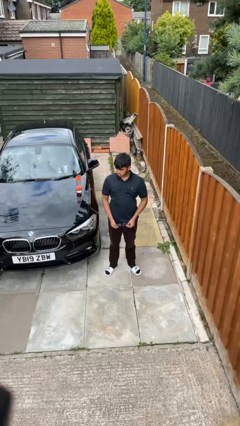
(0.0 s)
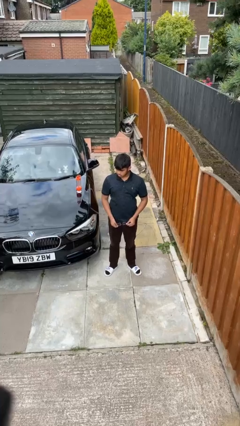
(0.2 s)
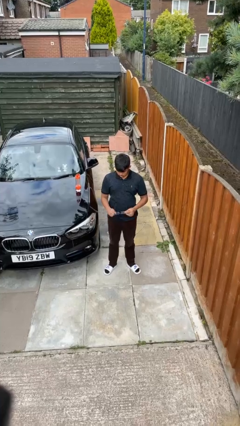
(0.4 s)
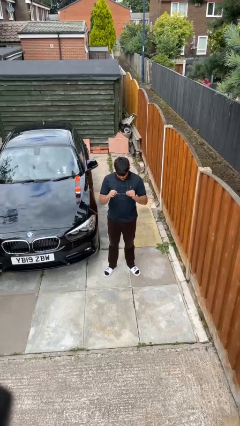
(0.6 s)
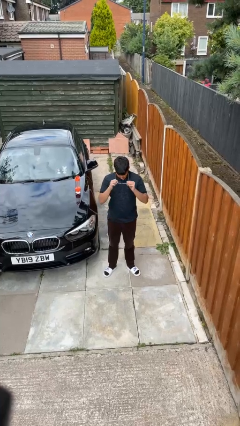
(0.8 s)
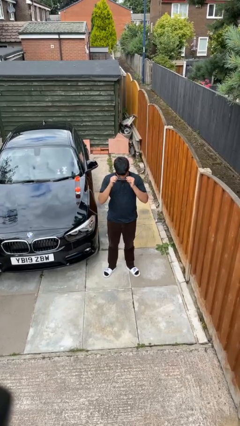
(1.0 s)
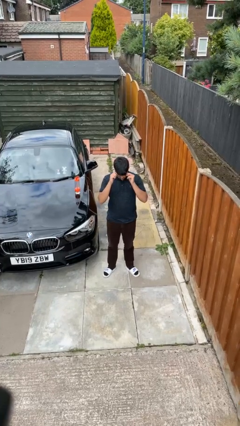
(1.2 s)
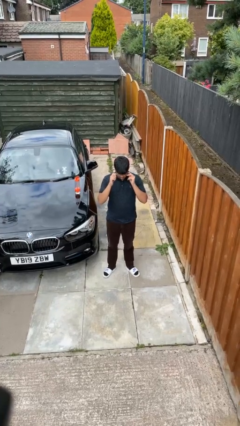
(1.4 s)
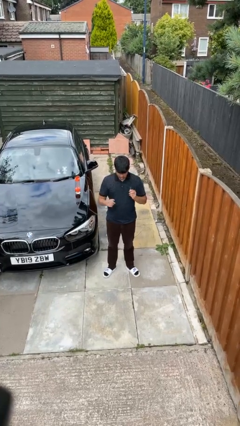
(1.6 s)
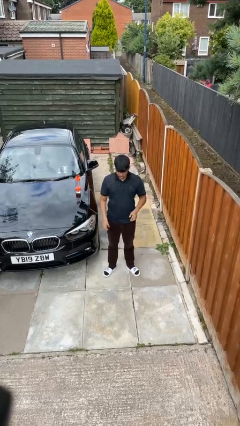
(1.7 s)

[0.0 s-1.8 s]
person puts on glasses

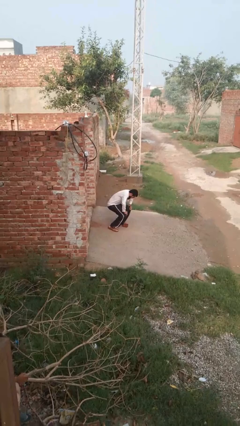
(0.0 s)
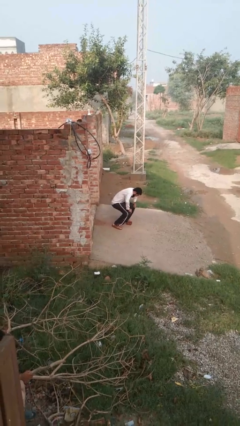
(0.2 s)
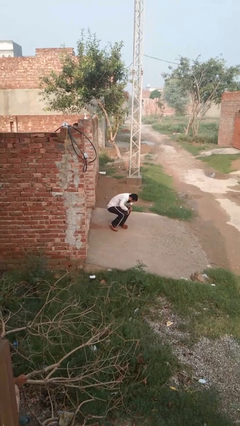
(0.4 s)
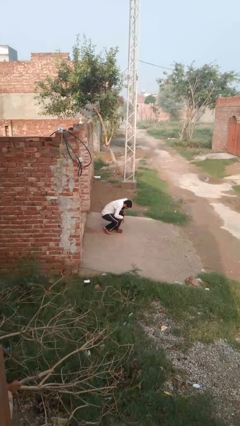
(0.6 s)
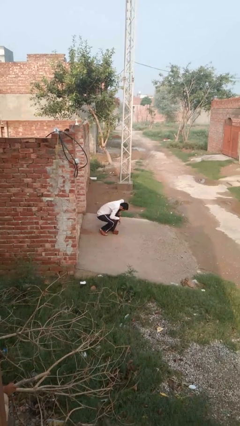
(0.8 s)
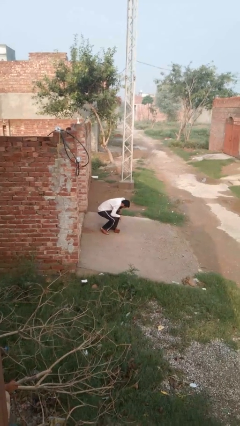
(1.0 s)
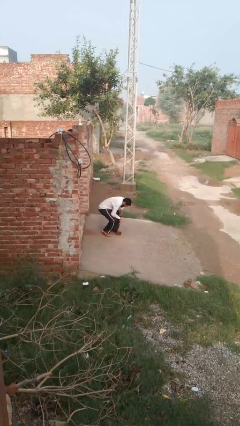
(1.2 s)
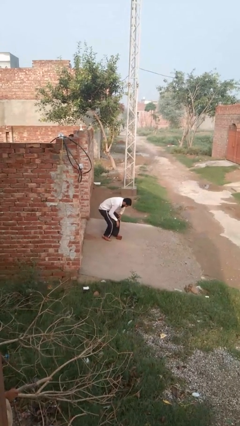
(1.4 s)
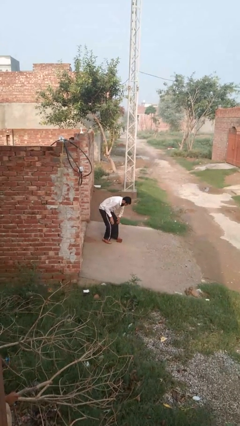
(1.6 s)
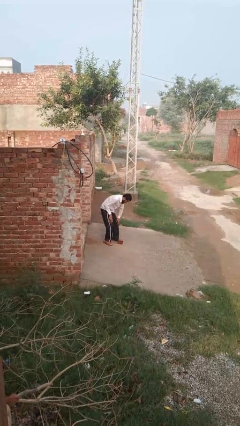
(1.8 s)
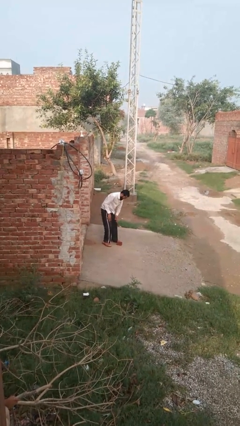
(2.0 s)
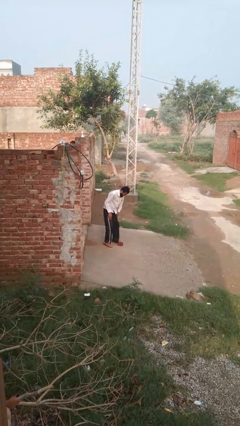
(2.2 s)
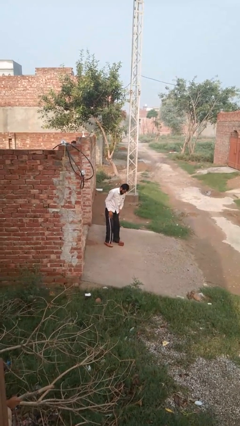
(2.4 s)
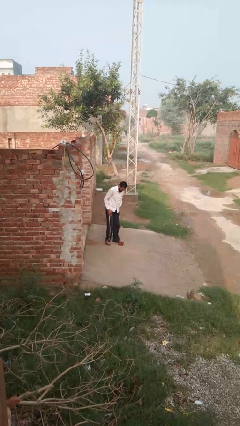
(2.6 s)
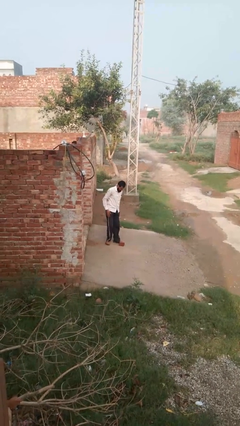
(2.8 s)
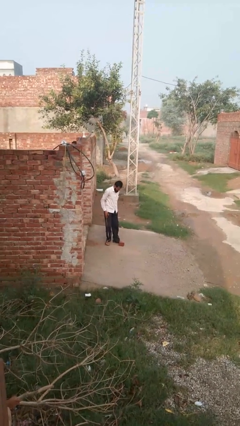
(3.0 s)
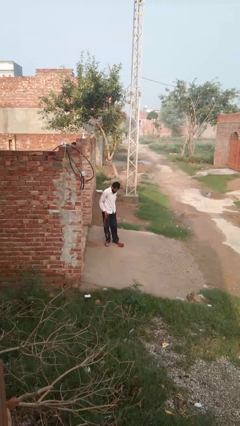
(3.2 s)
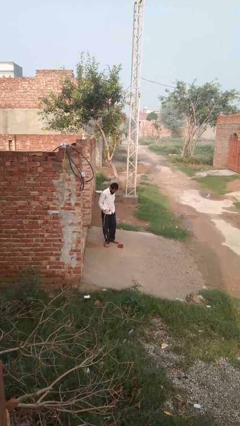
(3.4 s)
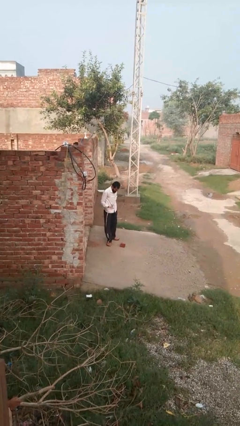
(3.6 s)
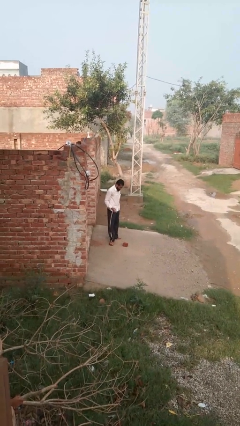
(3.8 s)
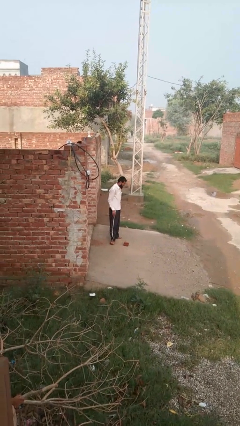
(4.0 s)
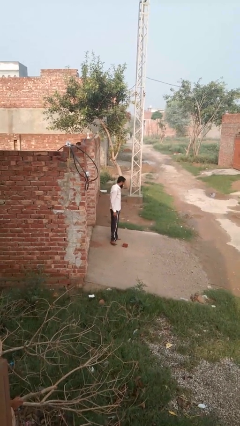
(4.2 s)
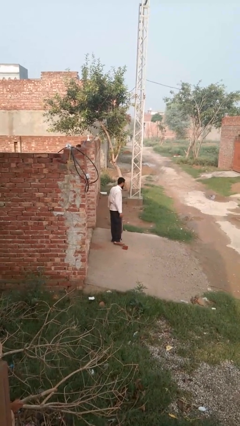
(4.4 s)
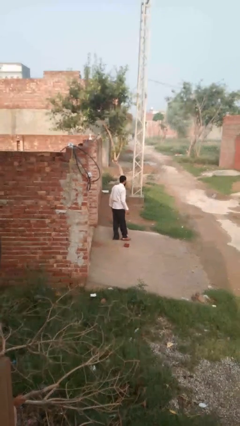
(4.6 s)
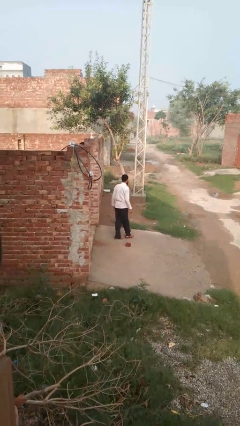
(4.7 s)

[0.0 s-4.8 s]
person stands up from floor

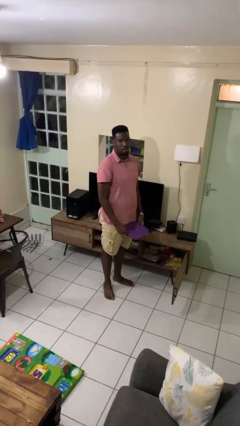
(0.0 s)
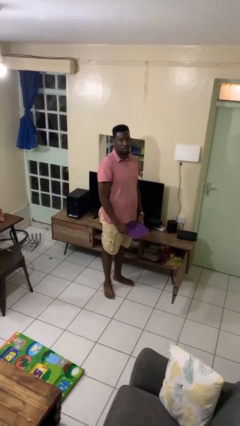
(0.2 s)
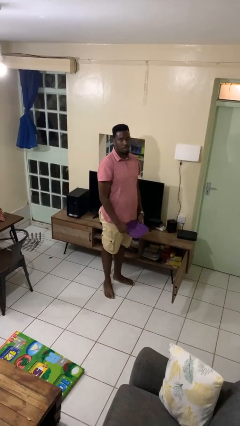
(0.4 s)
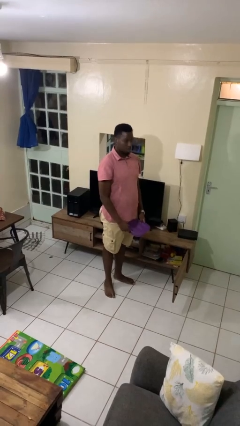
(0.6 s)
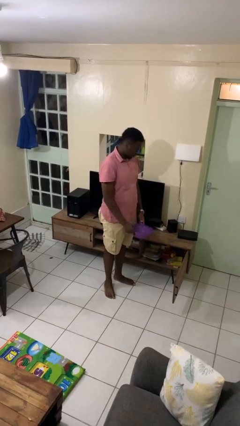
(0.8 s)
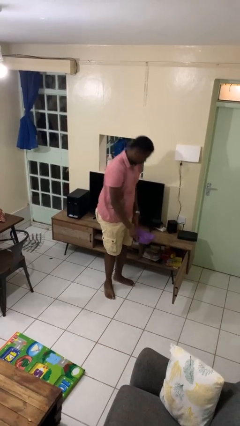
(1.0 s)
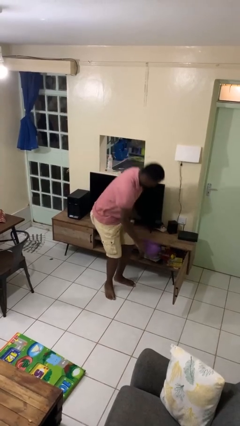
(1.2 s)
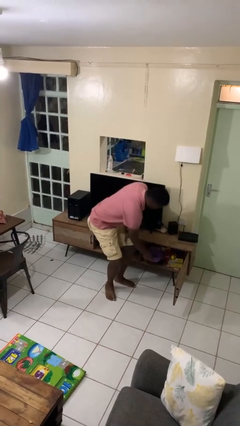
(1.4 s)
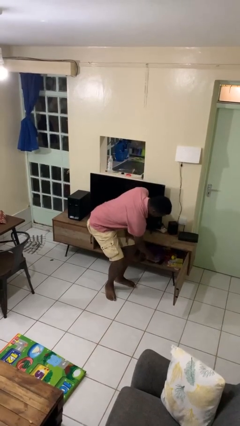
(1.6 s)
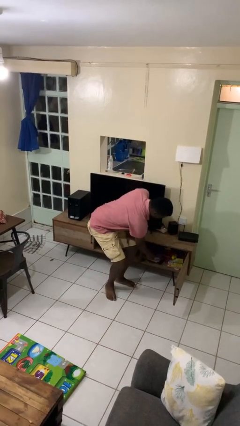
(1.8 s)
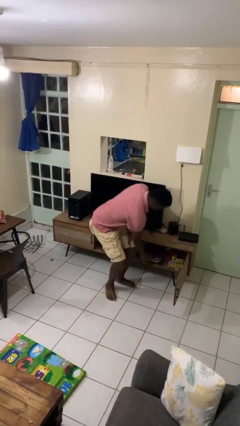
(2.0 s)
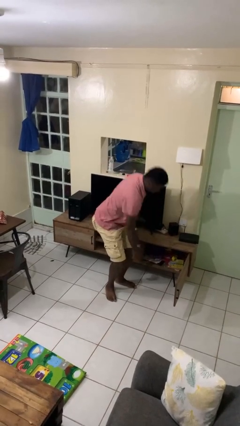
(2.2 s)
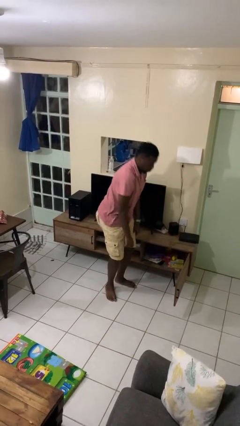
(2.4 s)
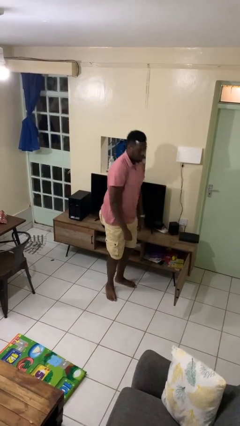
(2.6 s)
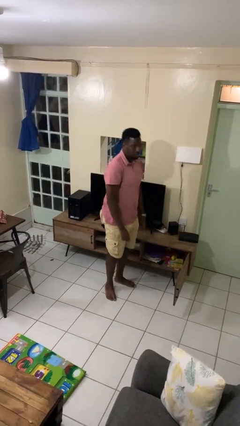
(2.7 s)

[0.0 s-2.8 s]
person puts down object into cabinet

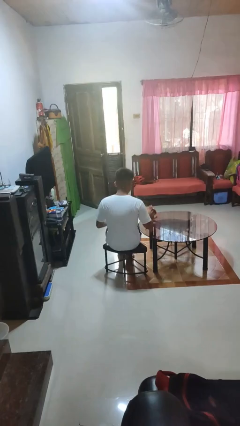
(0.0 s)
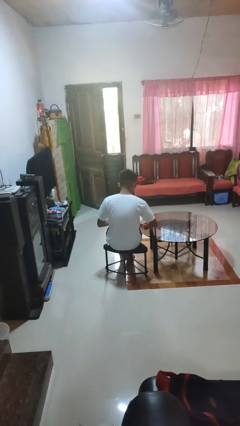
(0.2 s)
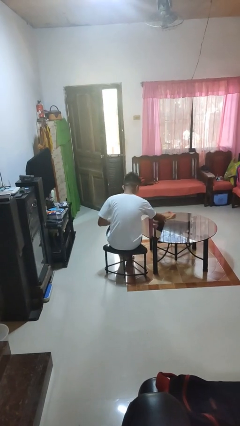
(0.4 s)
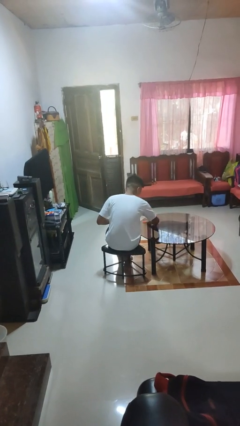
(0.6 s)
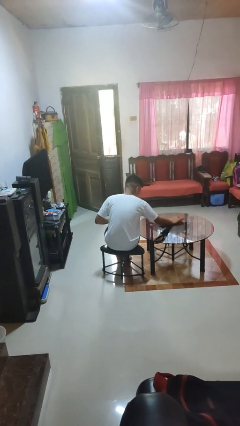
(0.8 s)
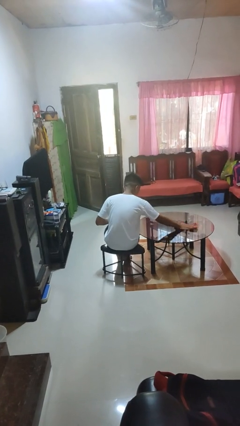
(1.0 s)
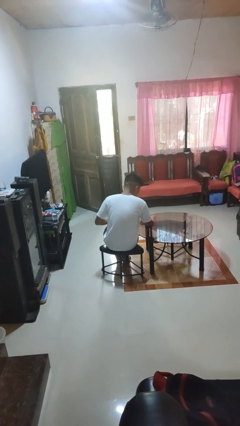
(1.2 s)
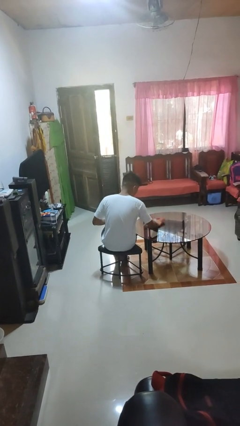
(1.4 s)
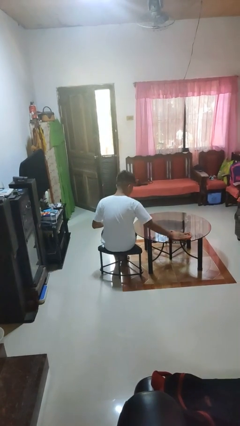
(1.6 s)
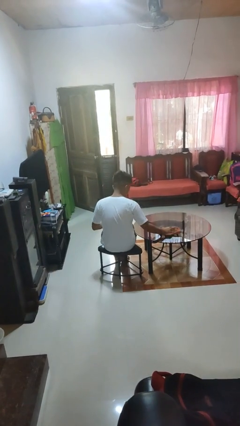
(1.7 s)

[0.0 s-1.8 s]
person cleans table with rag

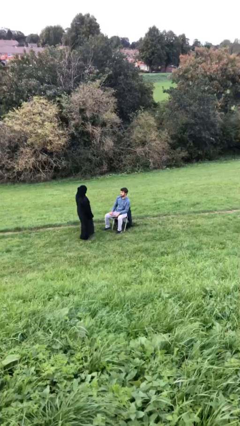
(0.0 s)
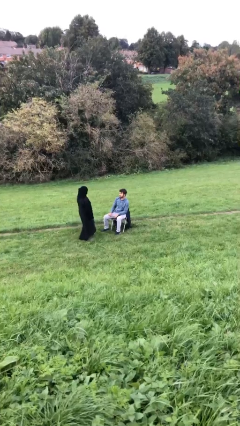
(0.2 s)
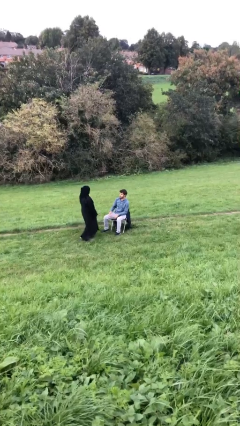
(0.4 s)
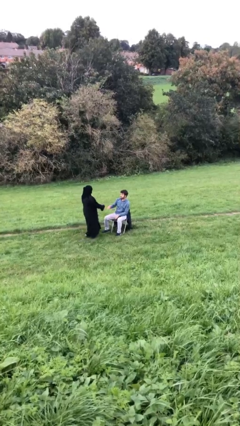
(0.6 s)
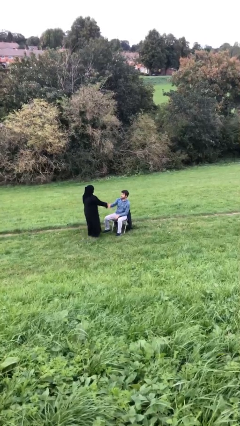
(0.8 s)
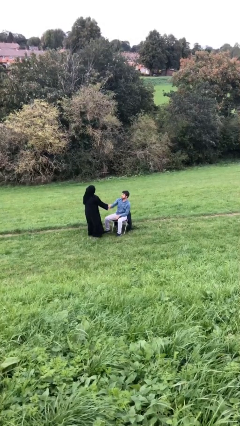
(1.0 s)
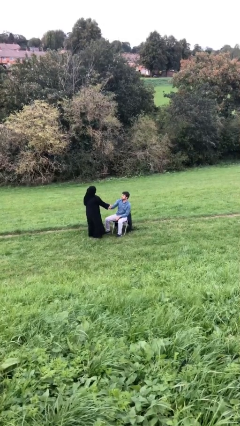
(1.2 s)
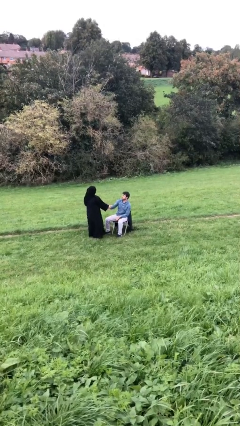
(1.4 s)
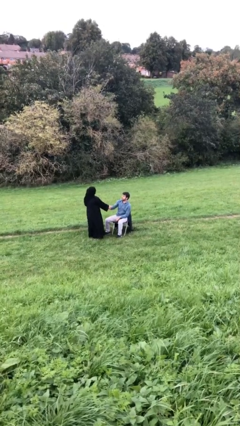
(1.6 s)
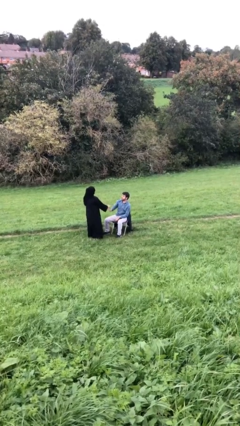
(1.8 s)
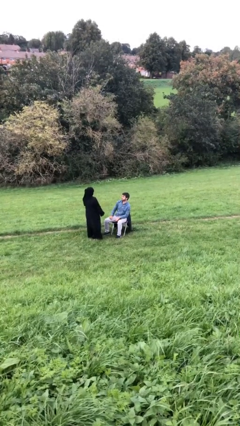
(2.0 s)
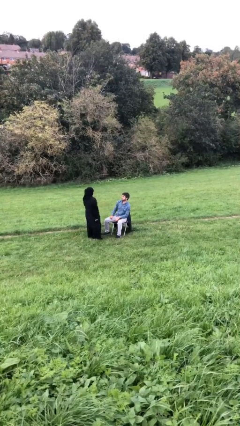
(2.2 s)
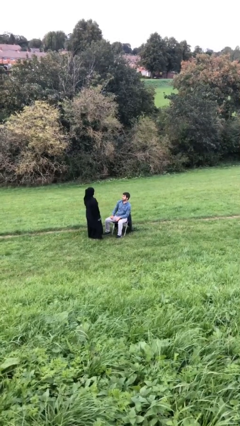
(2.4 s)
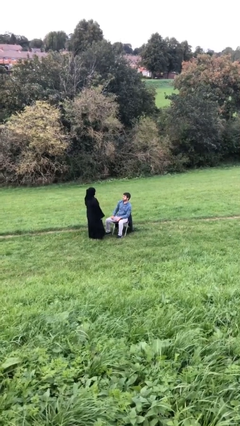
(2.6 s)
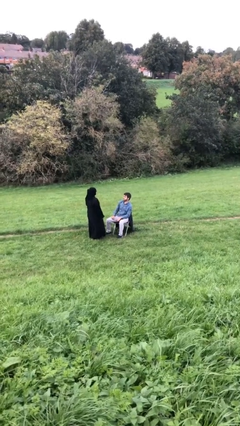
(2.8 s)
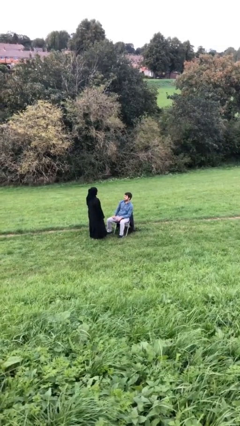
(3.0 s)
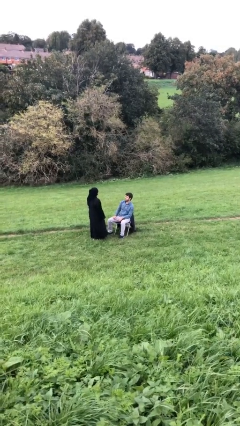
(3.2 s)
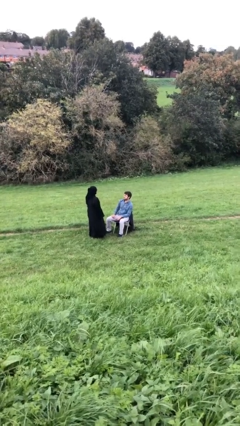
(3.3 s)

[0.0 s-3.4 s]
person shakes hand

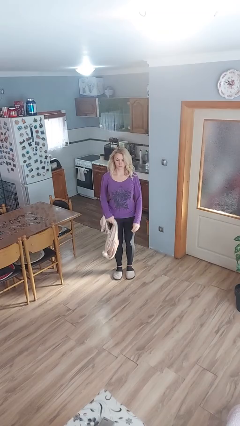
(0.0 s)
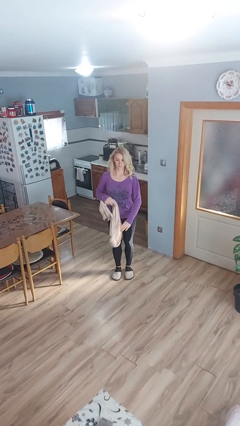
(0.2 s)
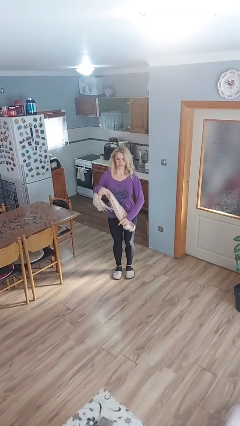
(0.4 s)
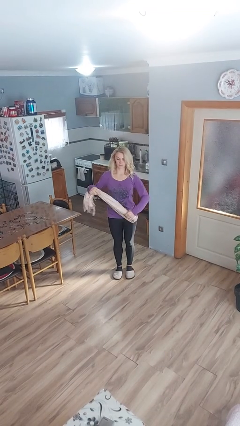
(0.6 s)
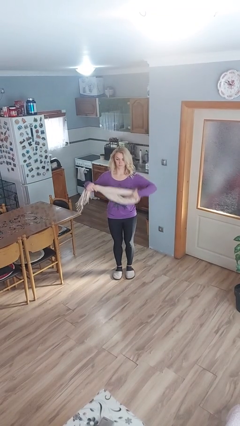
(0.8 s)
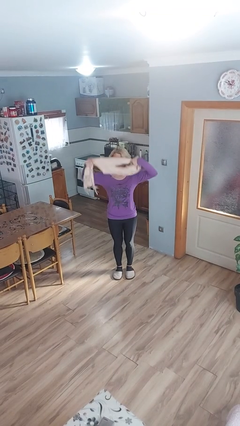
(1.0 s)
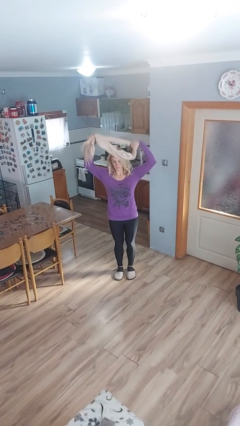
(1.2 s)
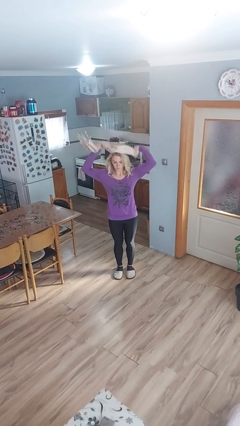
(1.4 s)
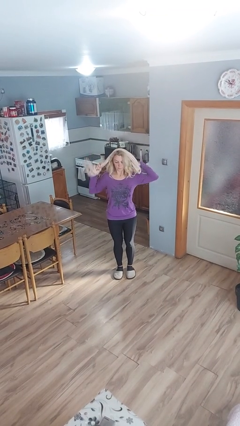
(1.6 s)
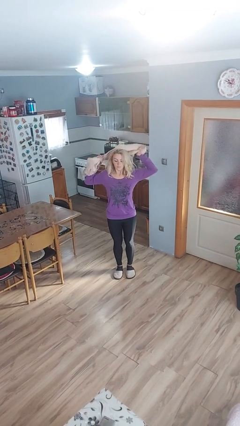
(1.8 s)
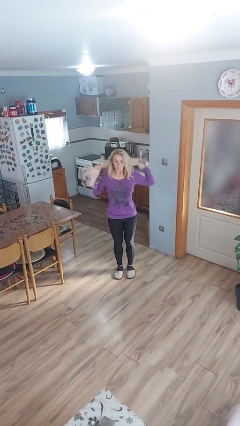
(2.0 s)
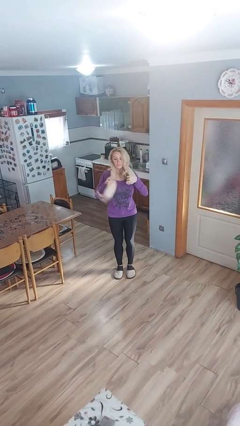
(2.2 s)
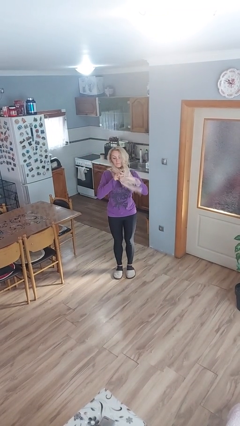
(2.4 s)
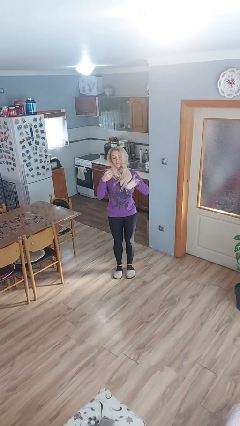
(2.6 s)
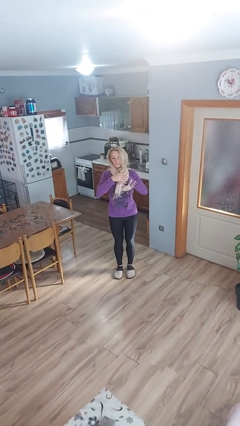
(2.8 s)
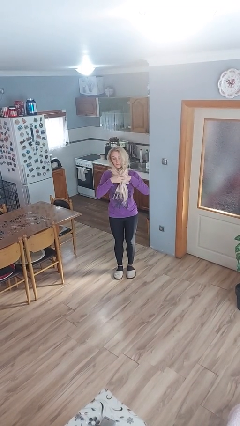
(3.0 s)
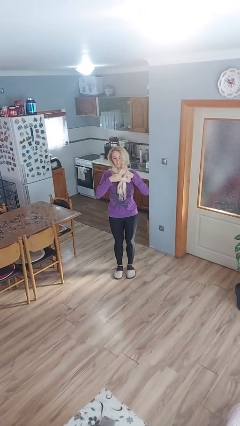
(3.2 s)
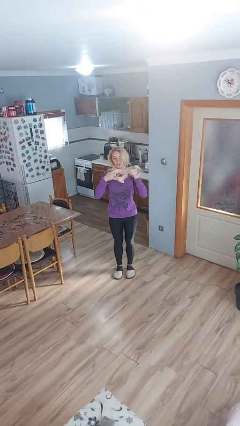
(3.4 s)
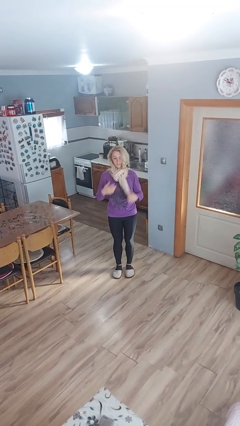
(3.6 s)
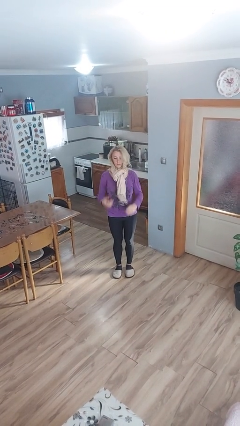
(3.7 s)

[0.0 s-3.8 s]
person puts on scarf
